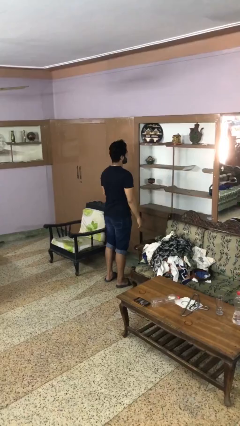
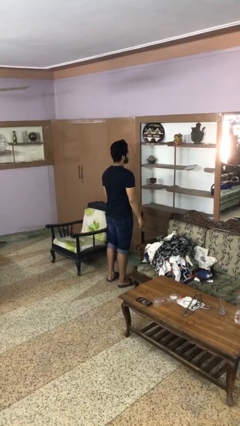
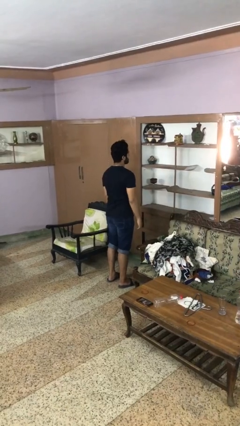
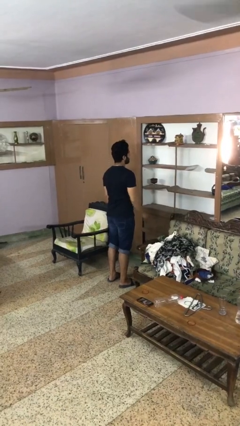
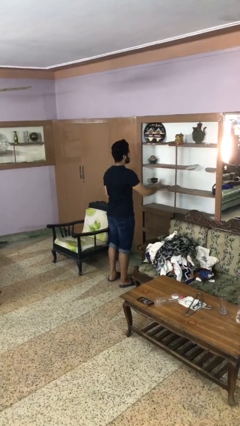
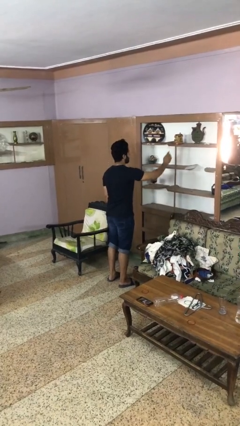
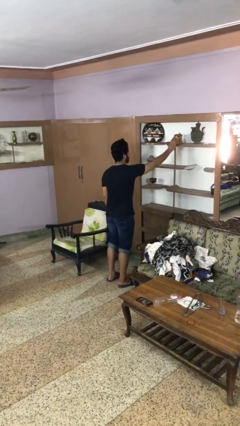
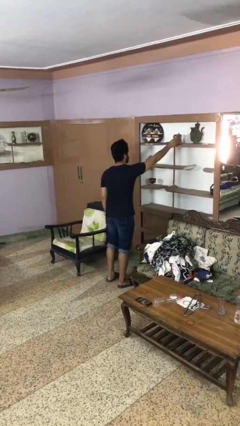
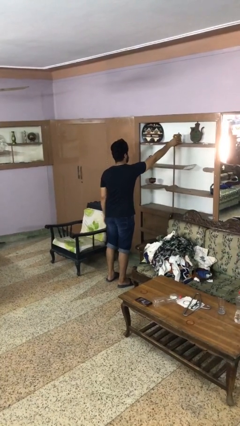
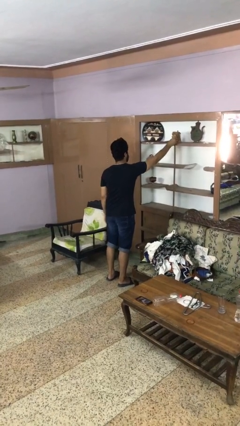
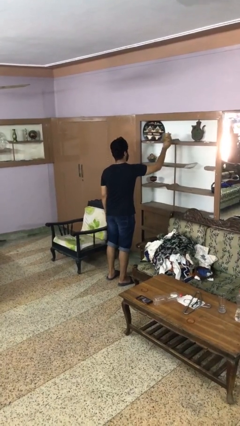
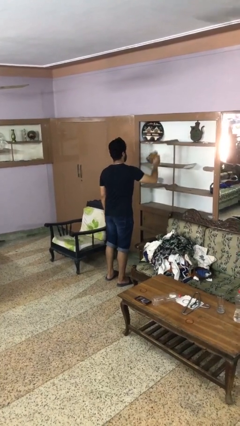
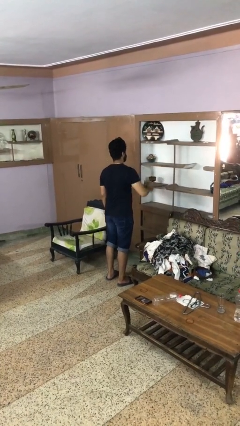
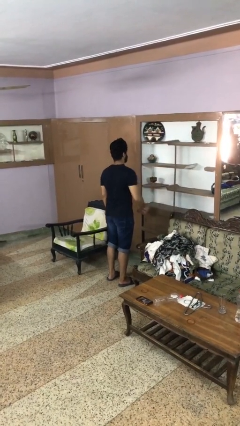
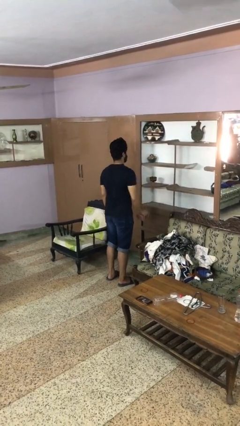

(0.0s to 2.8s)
person picks up object from shelf

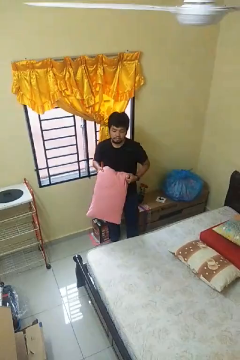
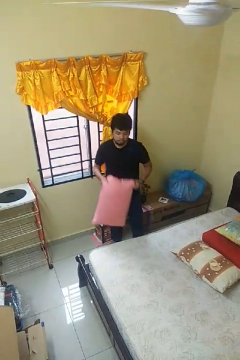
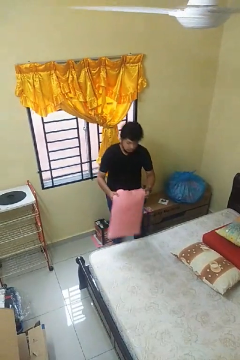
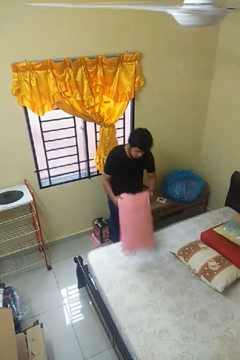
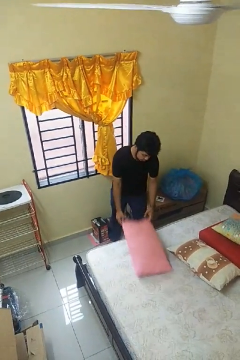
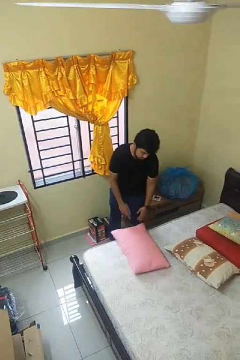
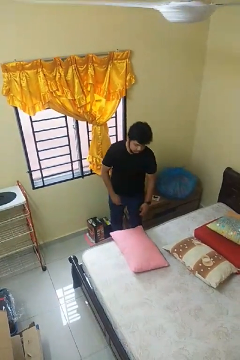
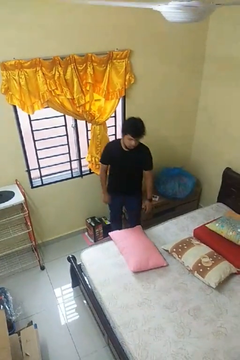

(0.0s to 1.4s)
person puts down object on bed

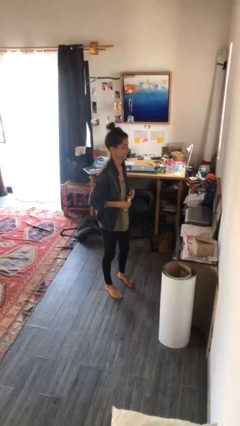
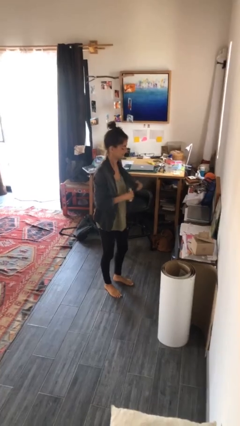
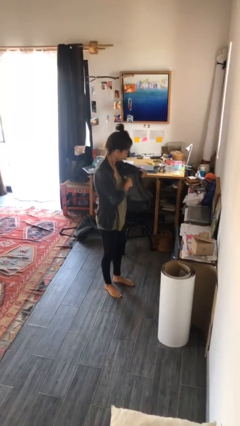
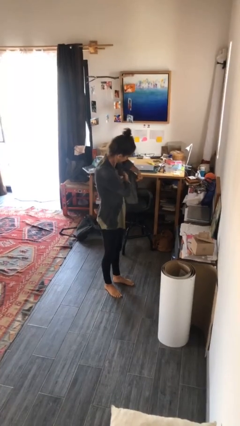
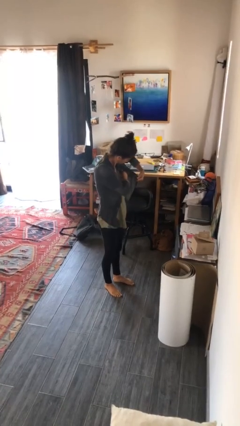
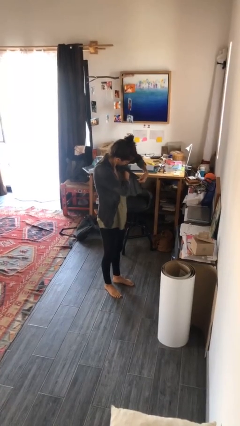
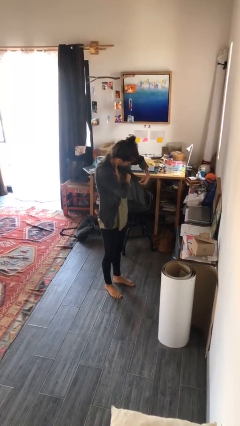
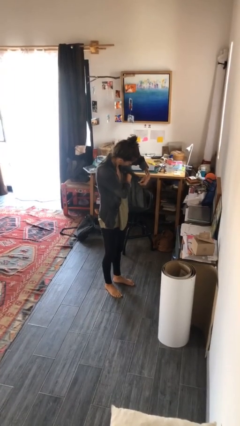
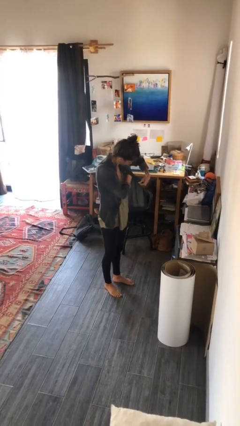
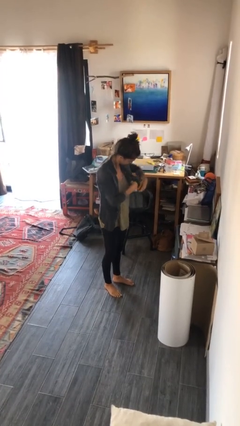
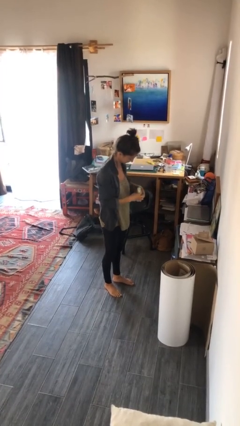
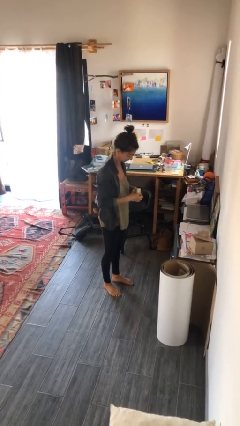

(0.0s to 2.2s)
person applies deodorant

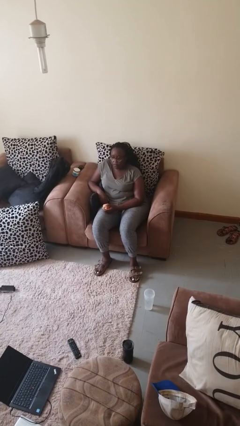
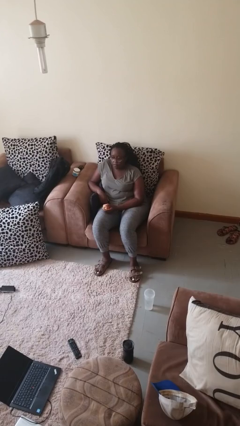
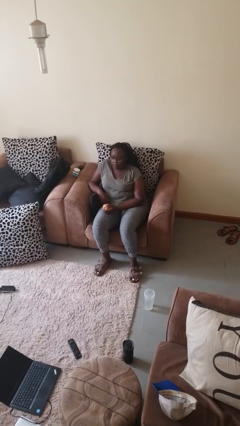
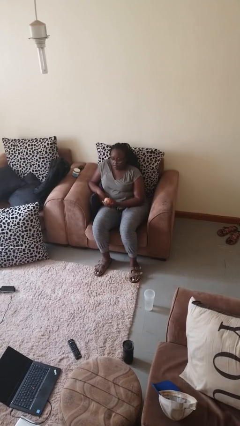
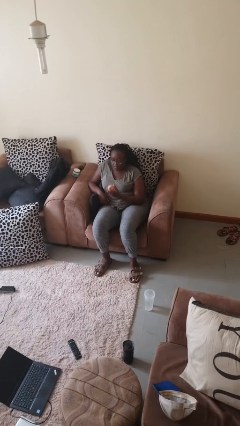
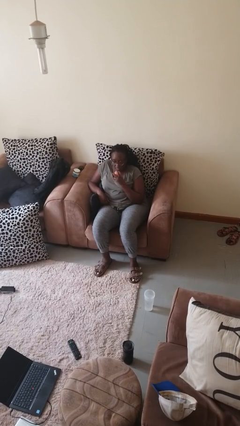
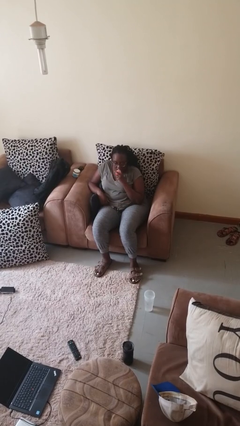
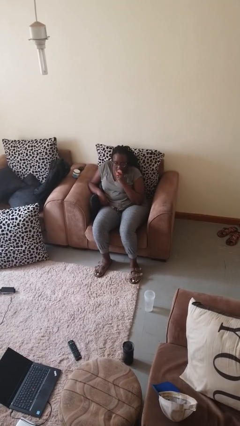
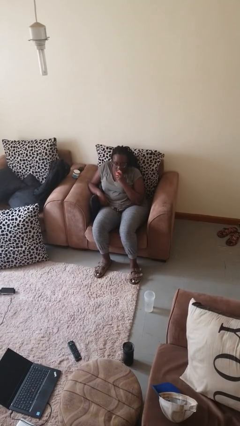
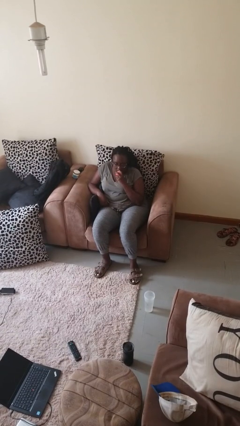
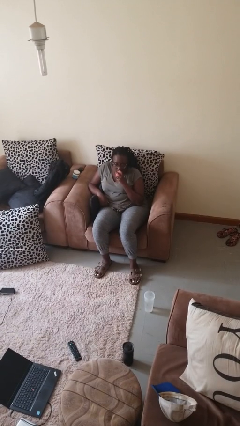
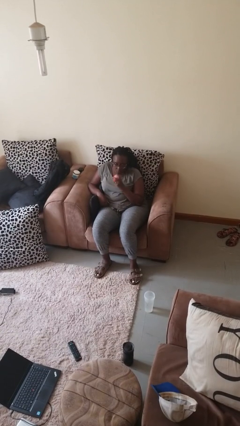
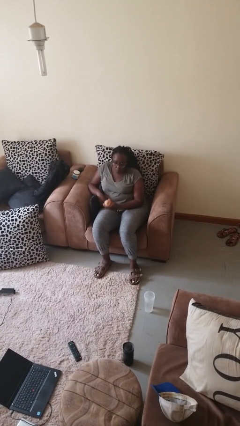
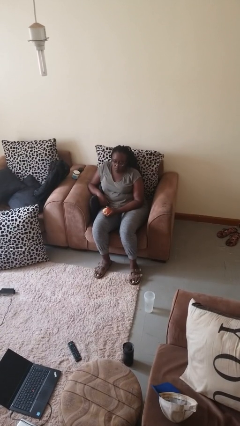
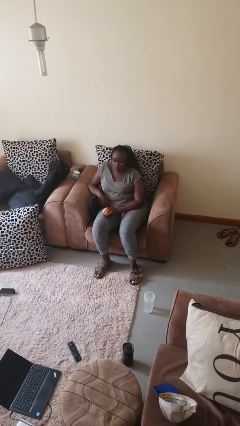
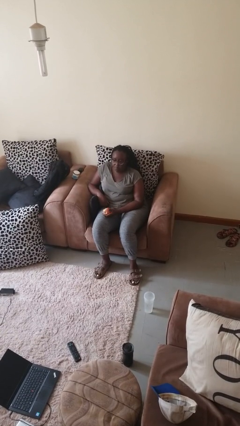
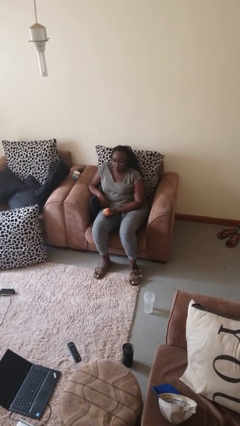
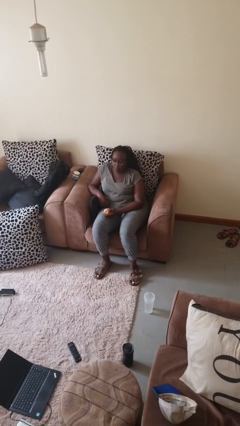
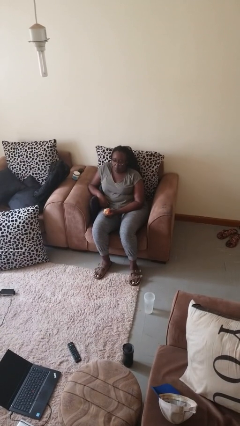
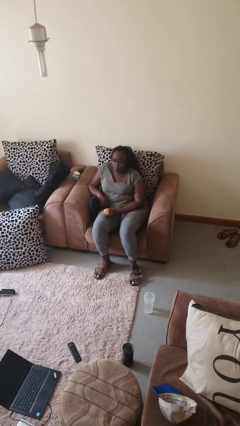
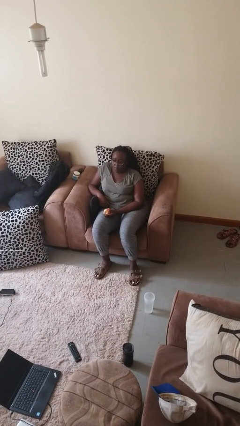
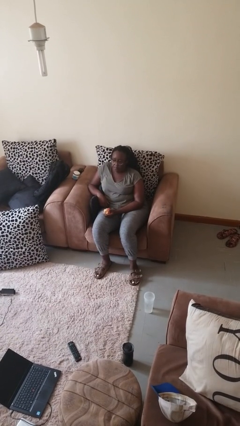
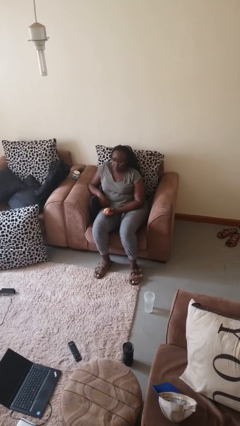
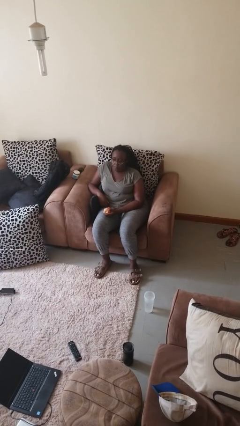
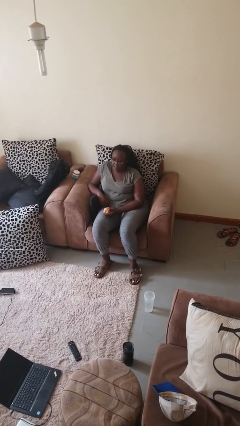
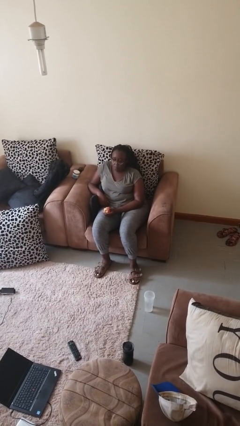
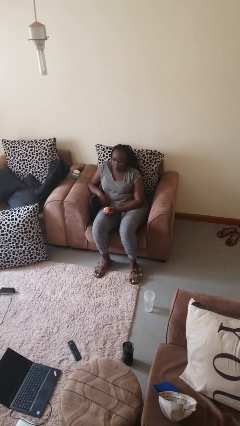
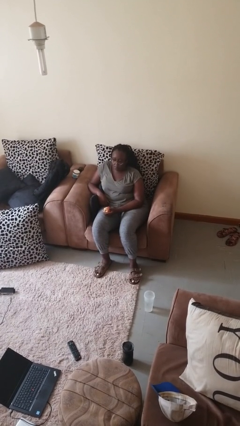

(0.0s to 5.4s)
person eats apple

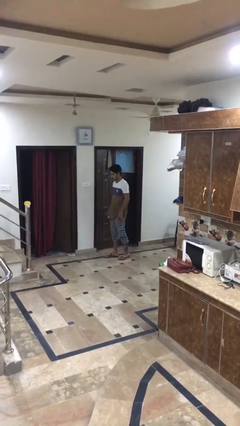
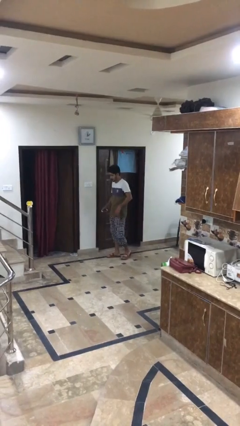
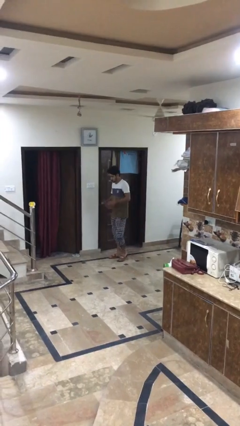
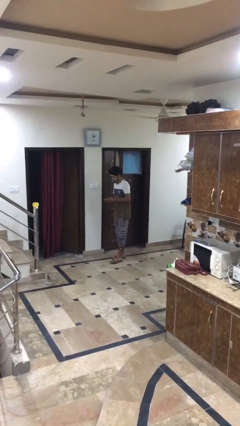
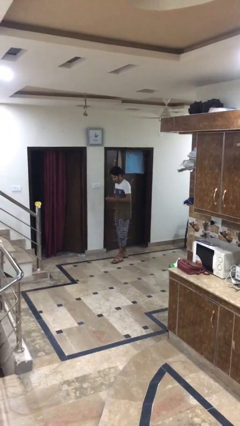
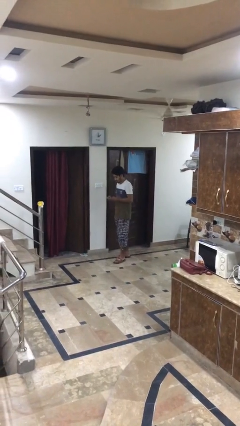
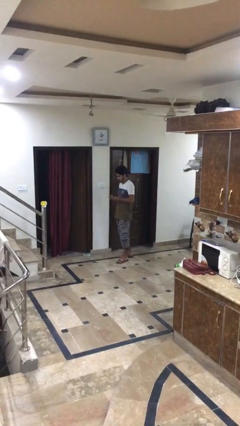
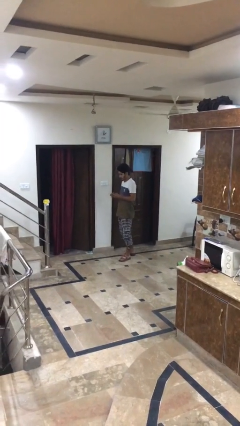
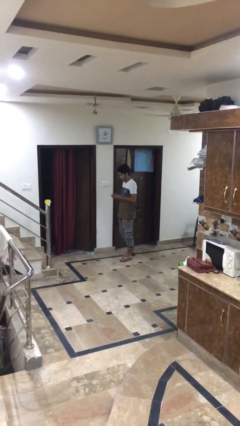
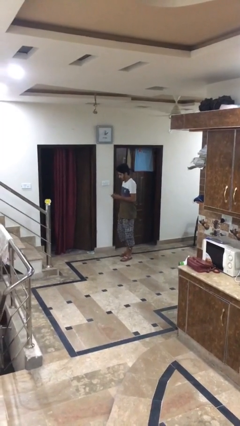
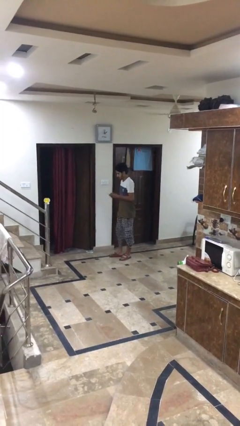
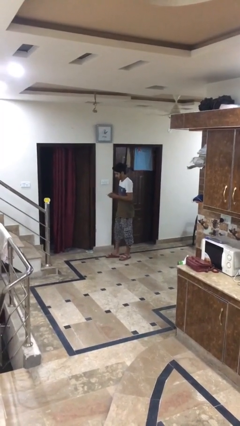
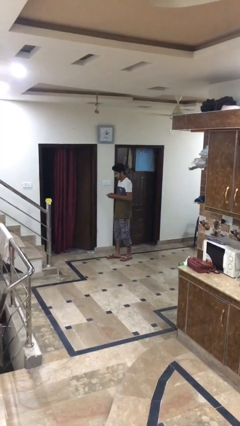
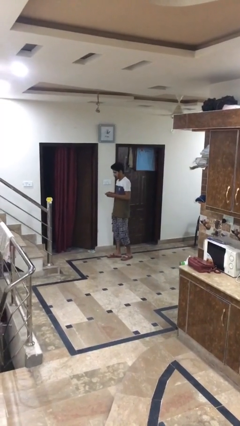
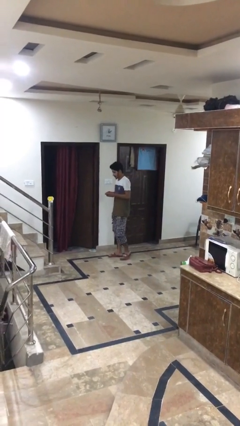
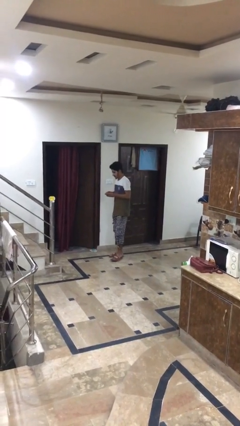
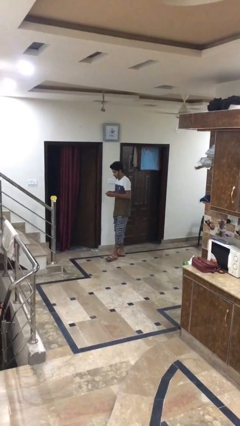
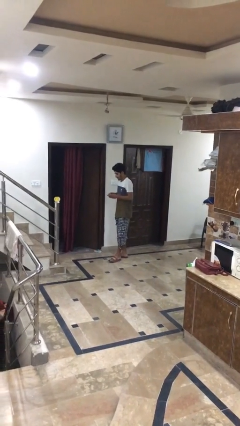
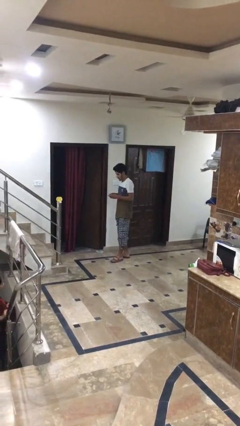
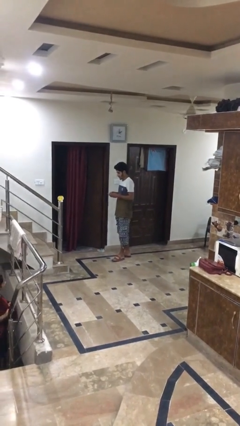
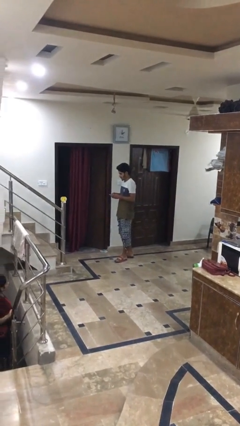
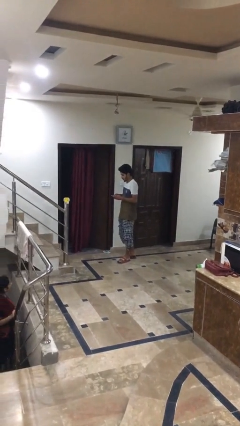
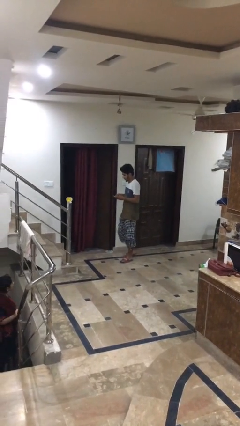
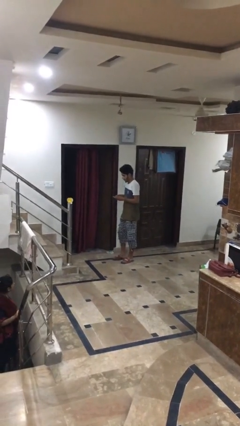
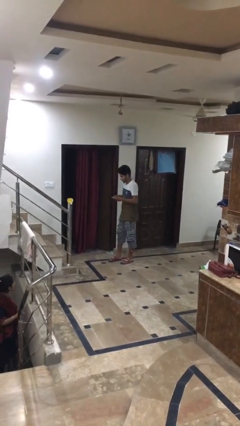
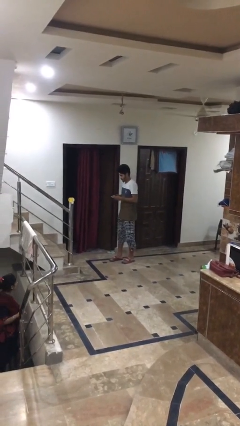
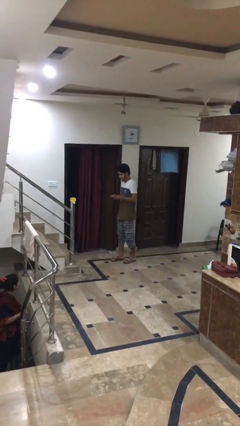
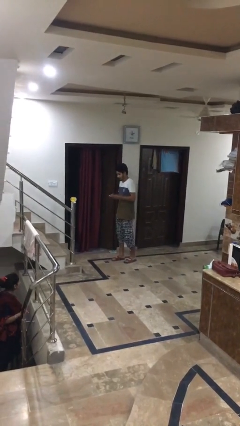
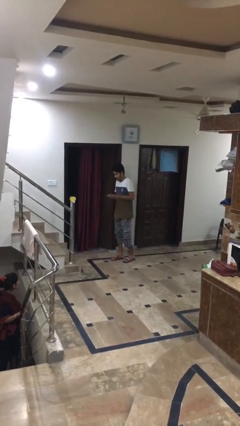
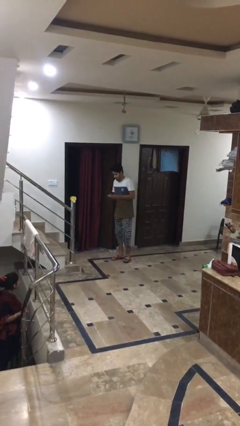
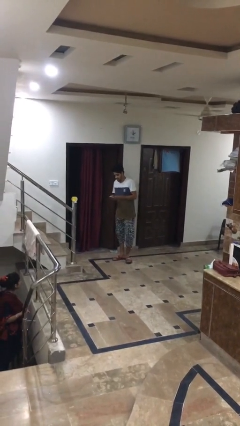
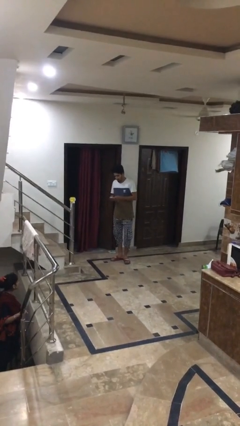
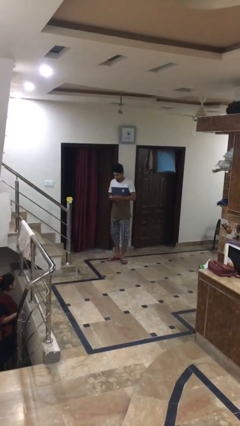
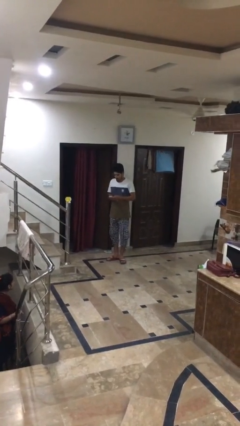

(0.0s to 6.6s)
person texts on phone
